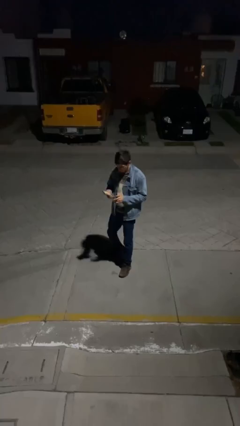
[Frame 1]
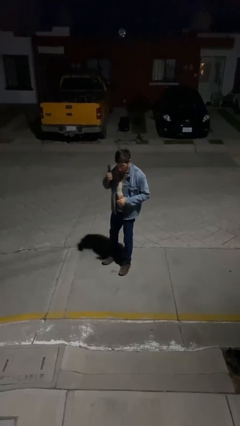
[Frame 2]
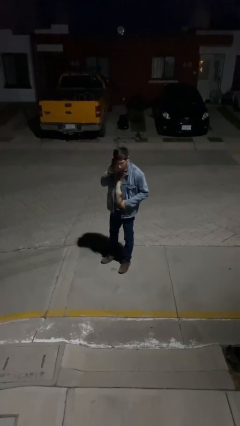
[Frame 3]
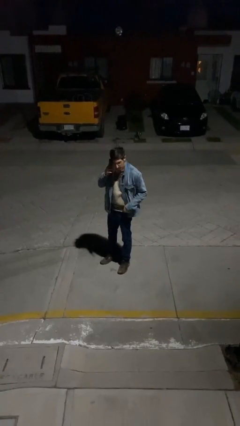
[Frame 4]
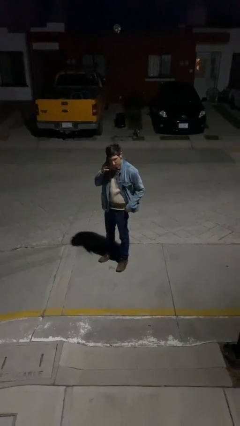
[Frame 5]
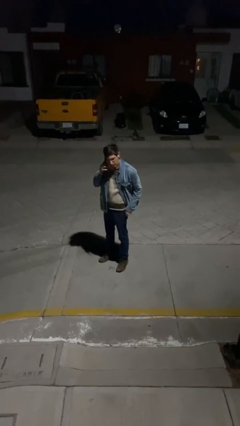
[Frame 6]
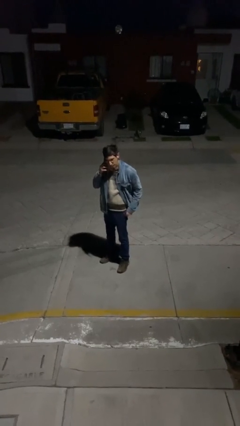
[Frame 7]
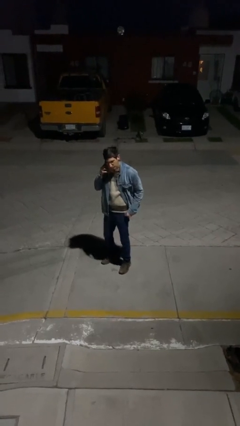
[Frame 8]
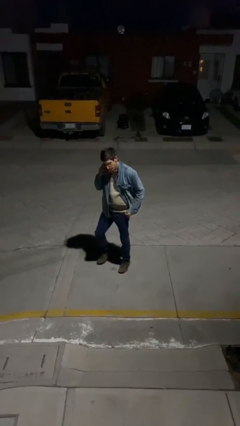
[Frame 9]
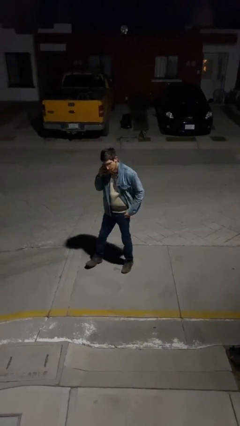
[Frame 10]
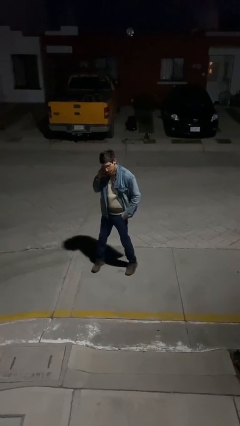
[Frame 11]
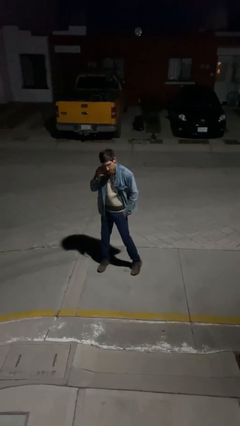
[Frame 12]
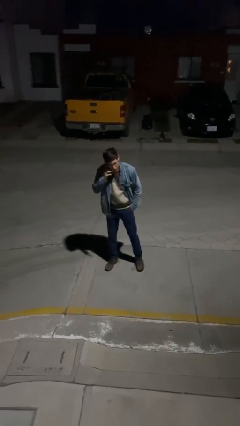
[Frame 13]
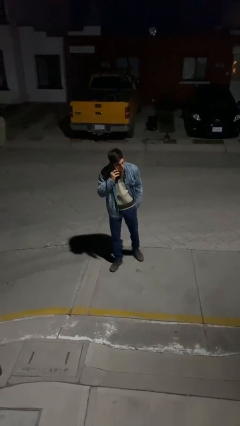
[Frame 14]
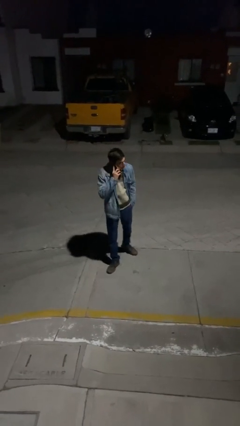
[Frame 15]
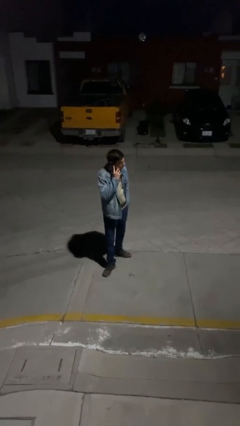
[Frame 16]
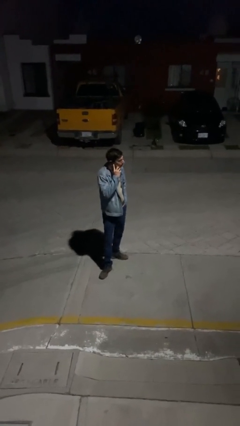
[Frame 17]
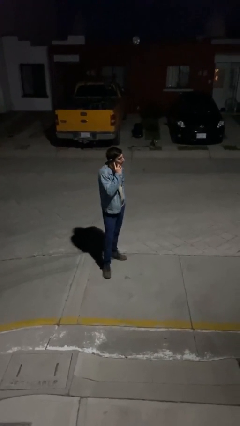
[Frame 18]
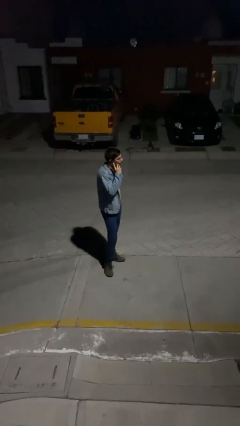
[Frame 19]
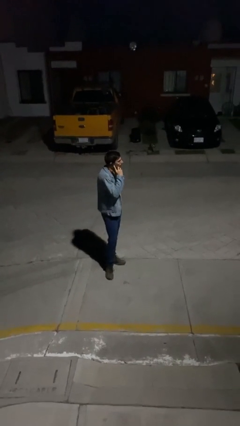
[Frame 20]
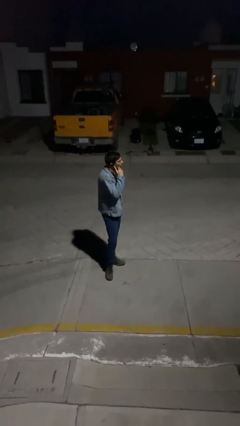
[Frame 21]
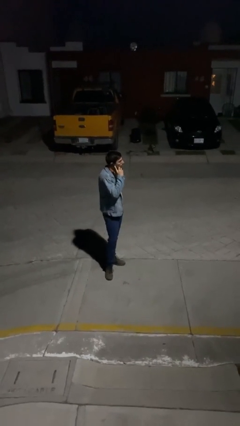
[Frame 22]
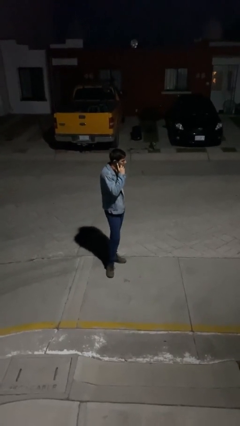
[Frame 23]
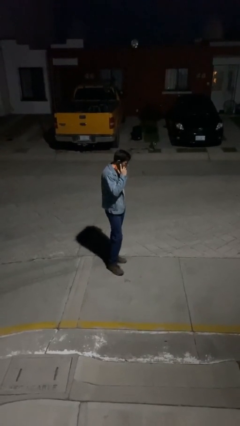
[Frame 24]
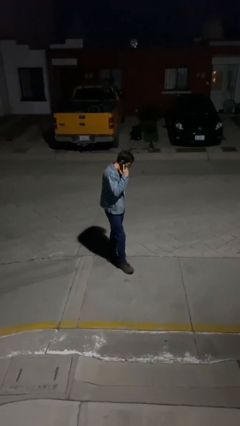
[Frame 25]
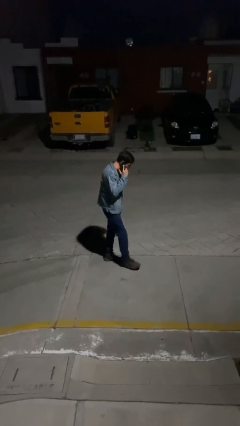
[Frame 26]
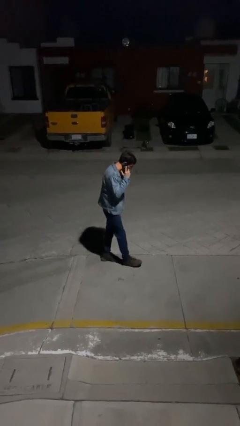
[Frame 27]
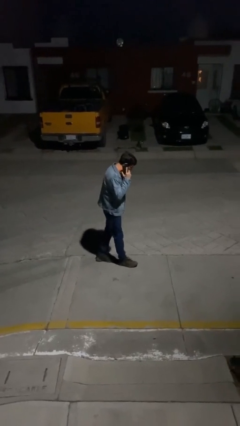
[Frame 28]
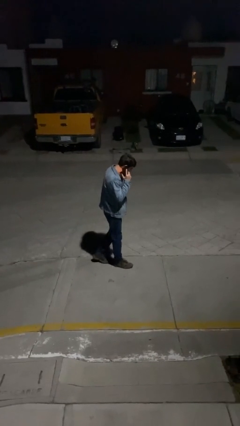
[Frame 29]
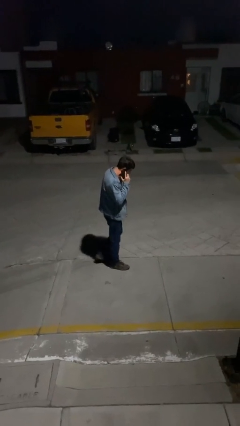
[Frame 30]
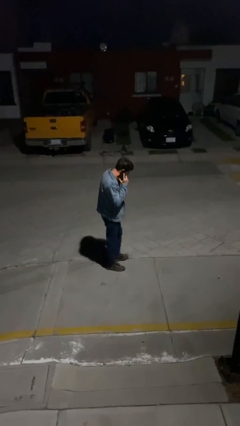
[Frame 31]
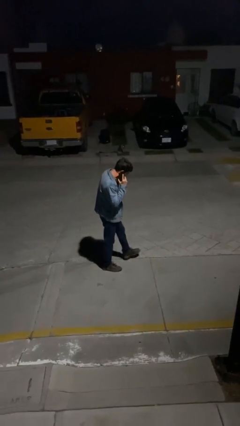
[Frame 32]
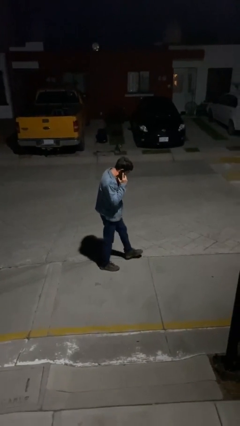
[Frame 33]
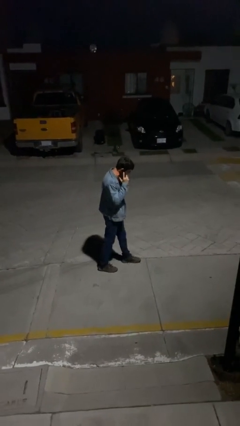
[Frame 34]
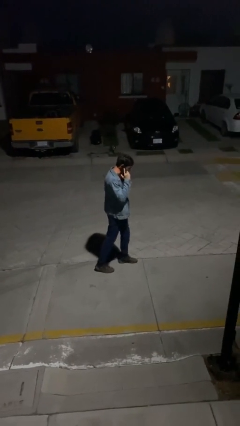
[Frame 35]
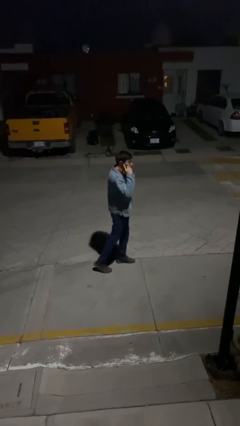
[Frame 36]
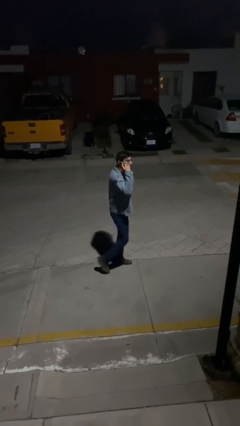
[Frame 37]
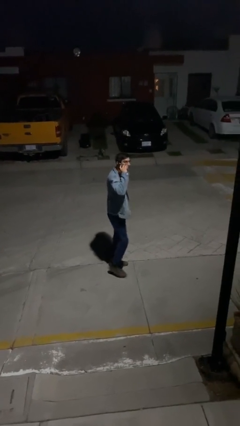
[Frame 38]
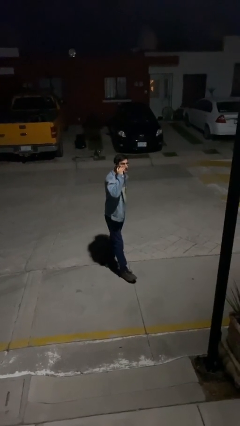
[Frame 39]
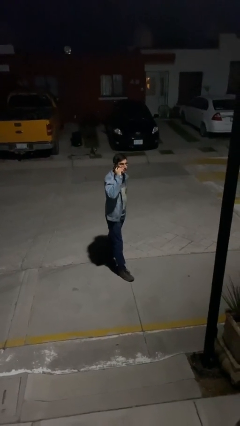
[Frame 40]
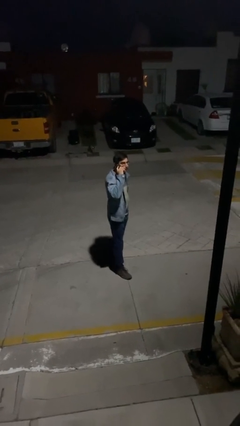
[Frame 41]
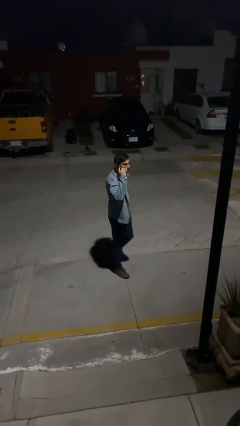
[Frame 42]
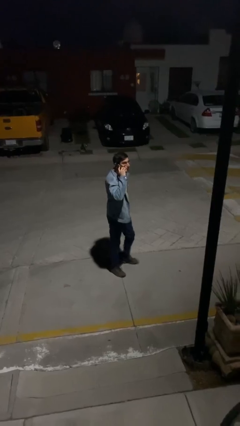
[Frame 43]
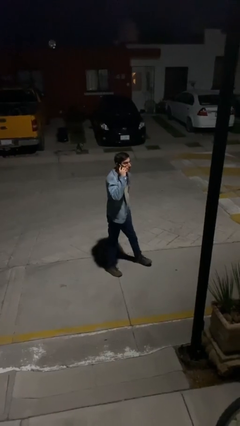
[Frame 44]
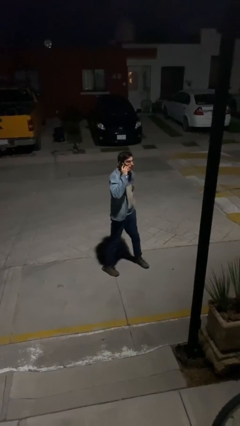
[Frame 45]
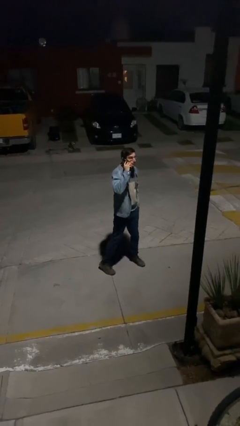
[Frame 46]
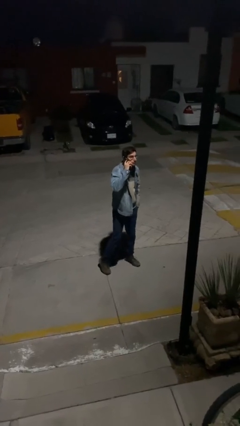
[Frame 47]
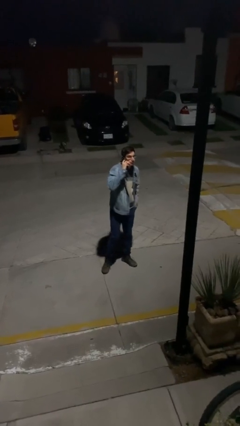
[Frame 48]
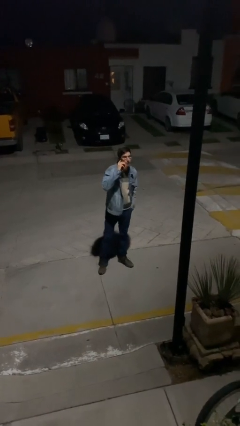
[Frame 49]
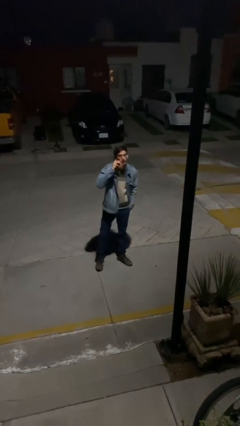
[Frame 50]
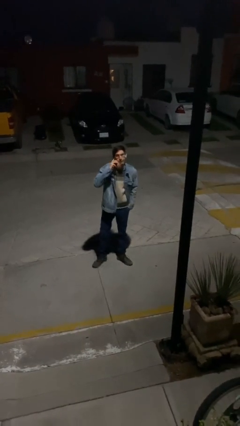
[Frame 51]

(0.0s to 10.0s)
person talks on phone

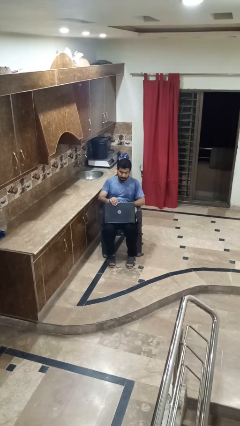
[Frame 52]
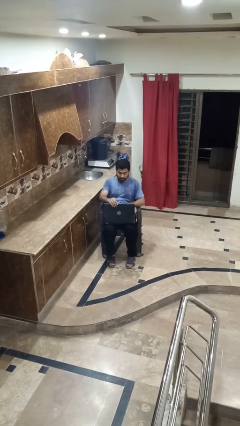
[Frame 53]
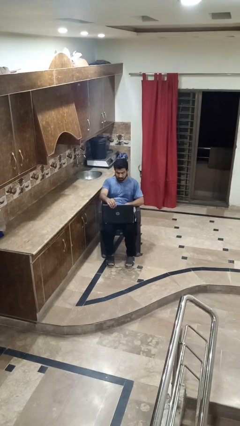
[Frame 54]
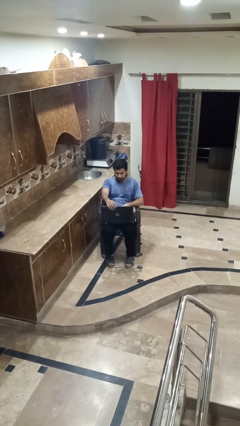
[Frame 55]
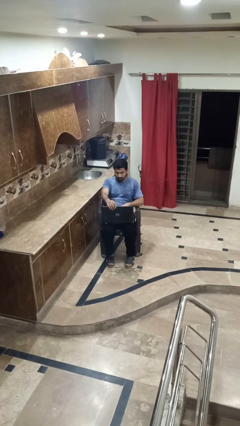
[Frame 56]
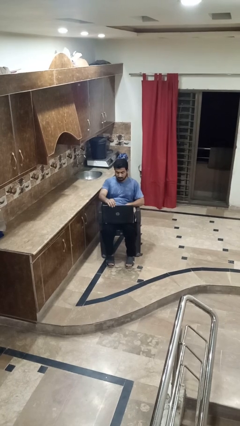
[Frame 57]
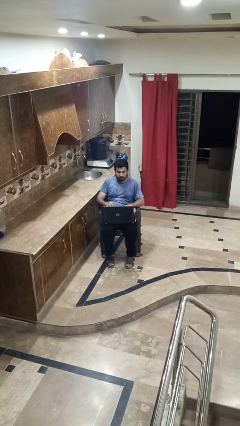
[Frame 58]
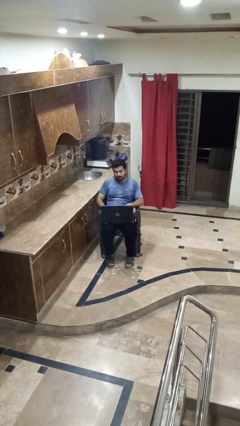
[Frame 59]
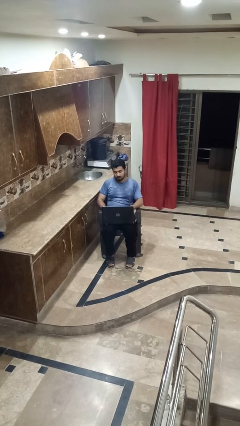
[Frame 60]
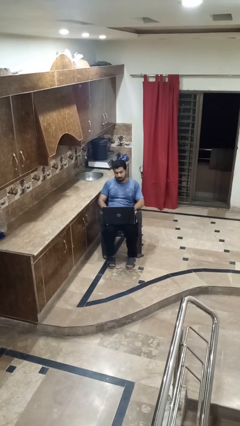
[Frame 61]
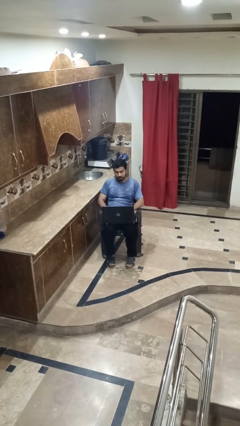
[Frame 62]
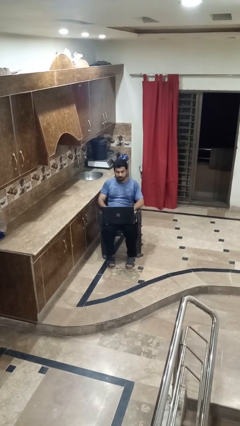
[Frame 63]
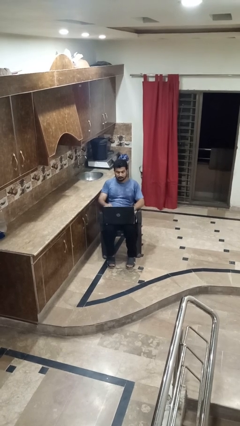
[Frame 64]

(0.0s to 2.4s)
person opens laptop

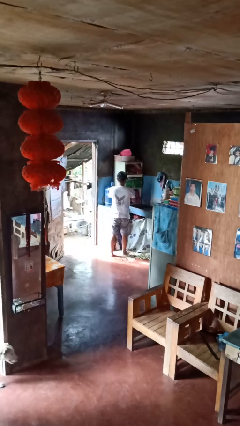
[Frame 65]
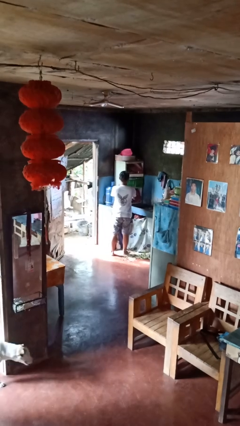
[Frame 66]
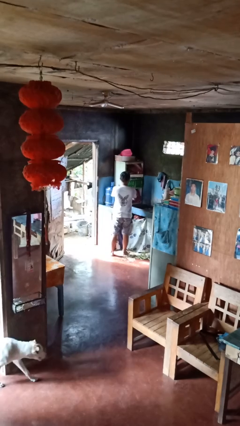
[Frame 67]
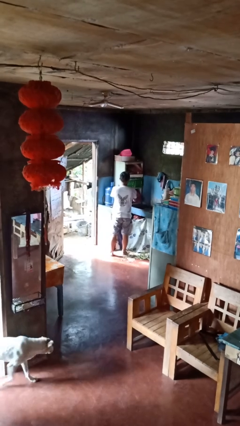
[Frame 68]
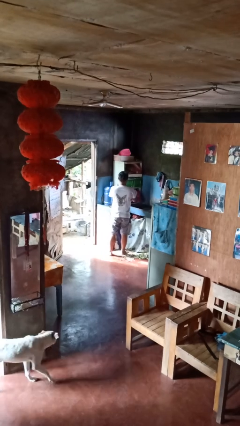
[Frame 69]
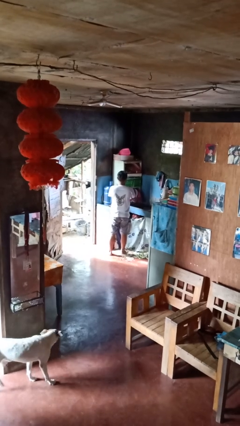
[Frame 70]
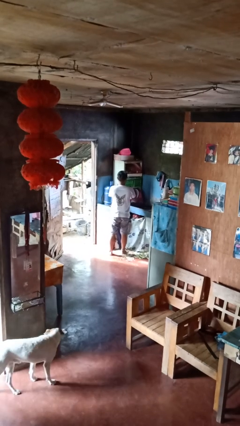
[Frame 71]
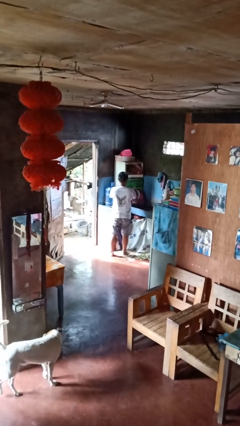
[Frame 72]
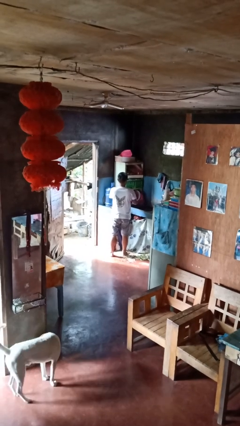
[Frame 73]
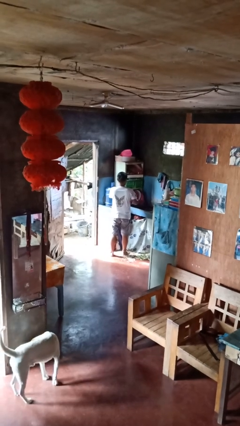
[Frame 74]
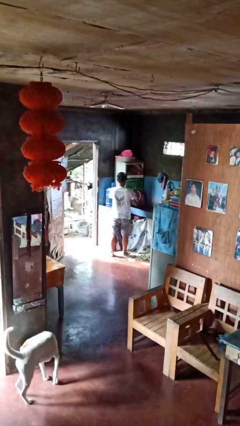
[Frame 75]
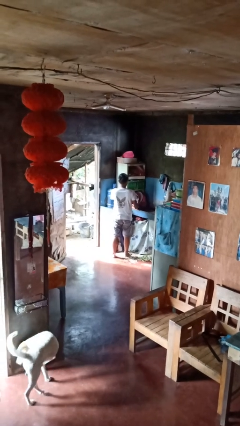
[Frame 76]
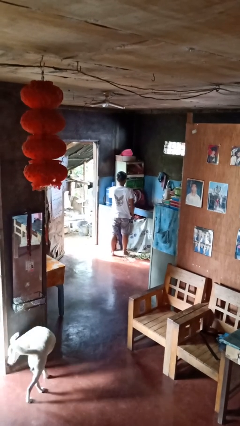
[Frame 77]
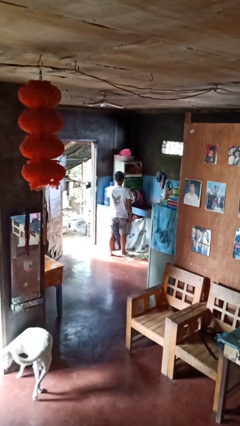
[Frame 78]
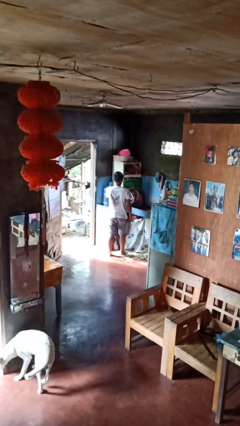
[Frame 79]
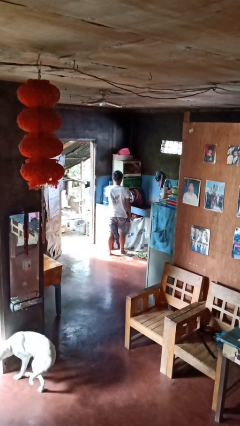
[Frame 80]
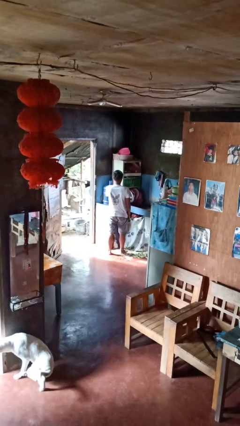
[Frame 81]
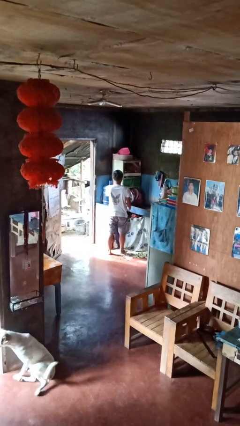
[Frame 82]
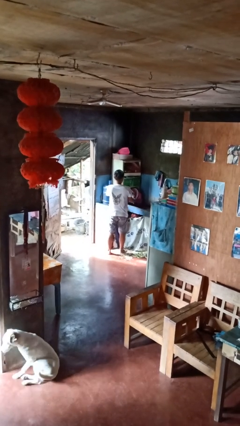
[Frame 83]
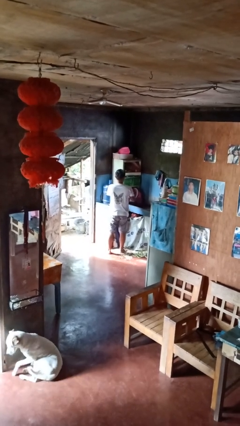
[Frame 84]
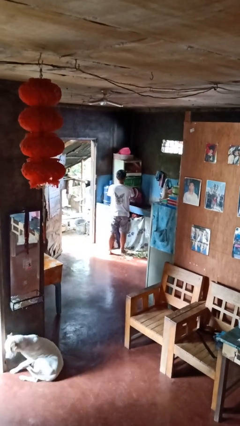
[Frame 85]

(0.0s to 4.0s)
person opens dishwasher

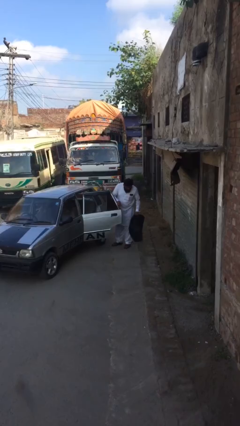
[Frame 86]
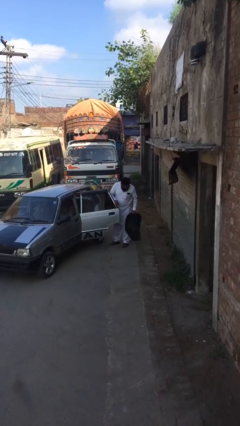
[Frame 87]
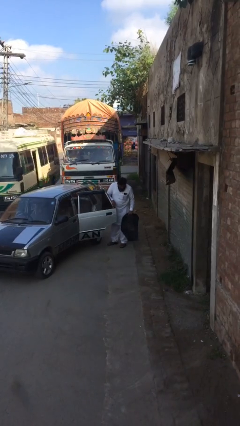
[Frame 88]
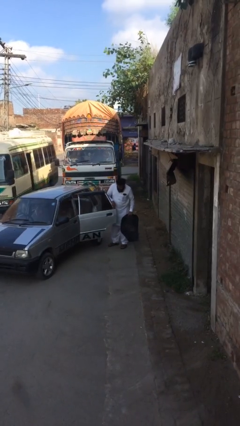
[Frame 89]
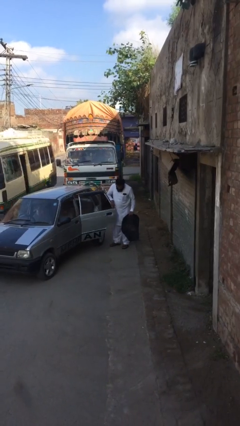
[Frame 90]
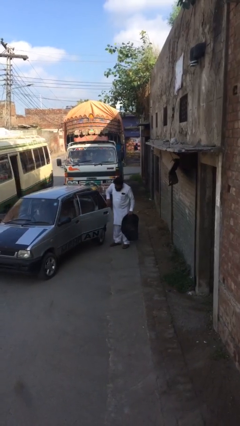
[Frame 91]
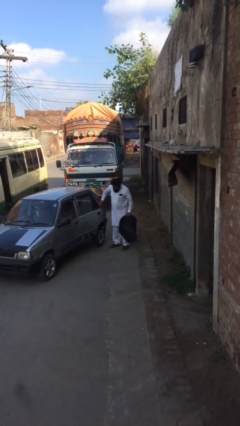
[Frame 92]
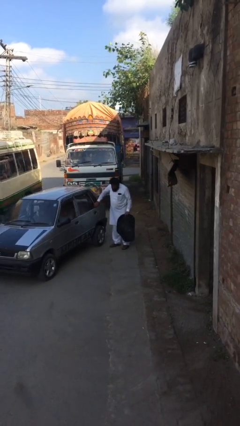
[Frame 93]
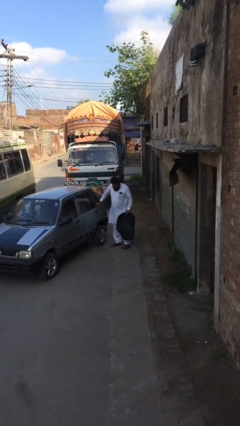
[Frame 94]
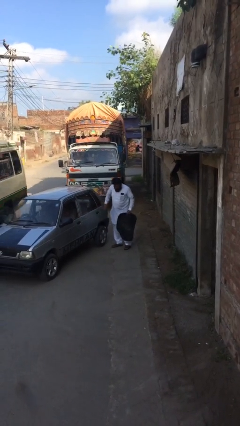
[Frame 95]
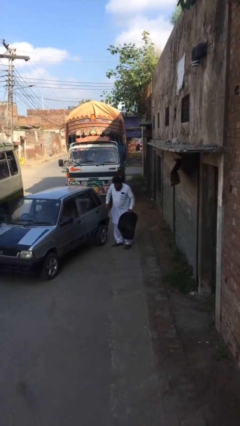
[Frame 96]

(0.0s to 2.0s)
person closes car door
